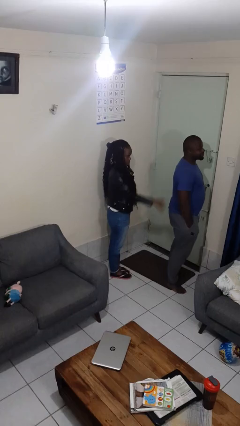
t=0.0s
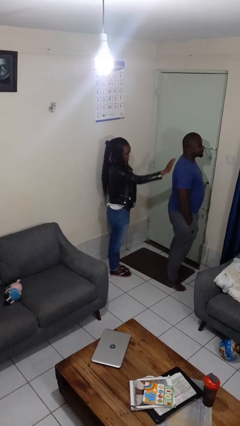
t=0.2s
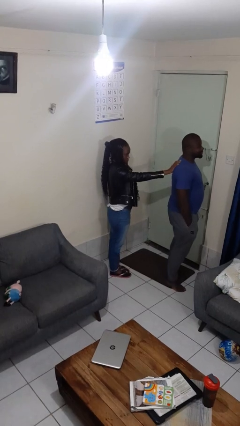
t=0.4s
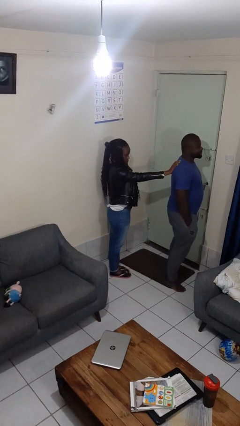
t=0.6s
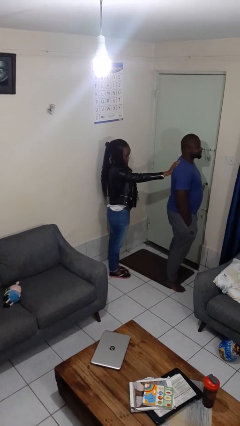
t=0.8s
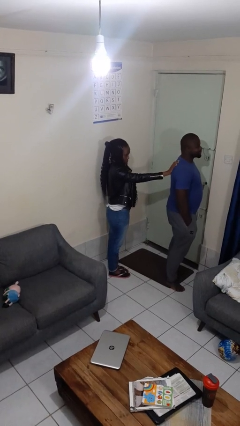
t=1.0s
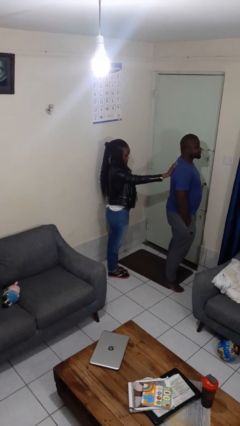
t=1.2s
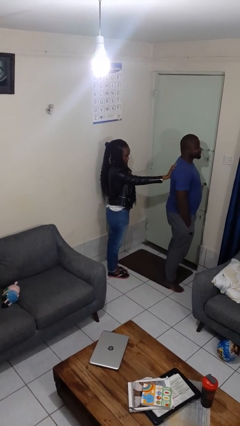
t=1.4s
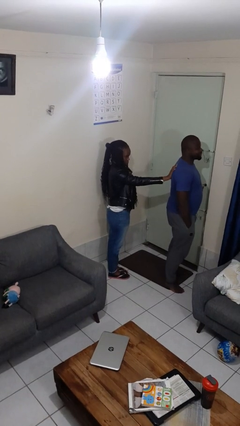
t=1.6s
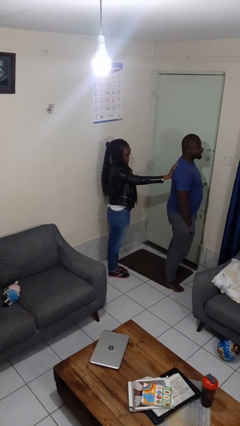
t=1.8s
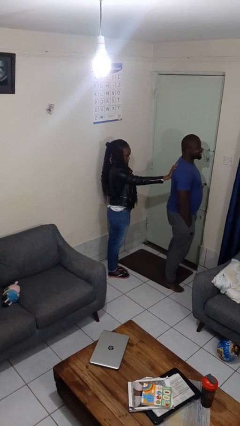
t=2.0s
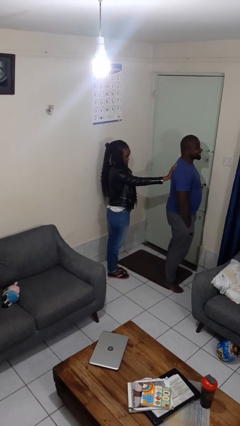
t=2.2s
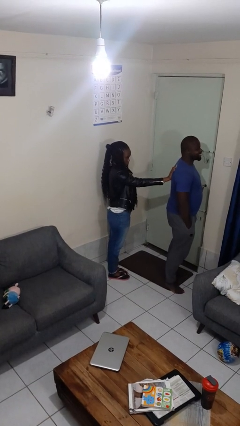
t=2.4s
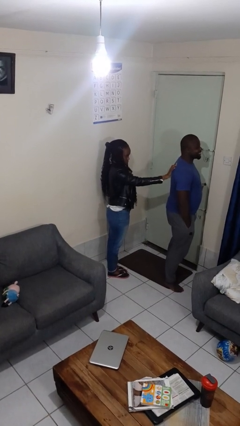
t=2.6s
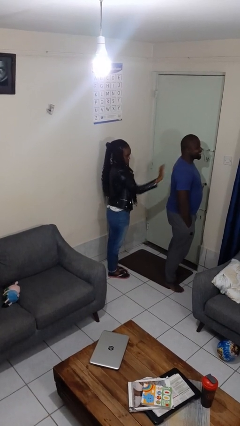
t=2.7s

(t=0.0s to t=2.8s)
person touches back of person

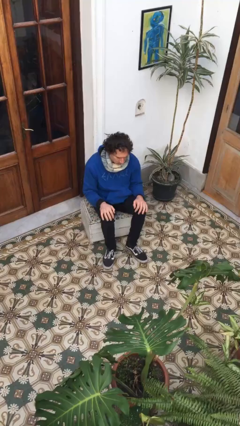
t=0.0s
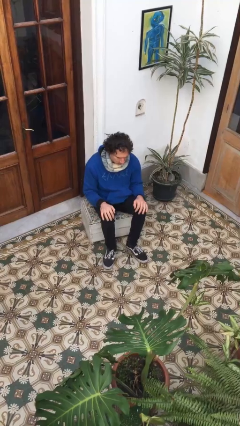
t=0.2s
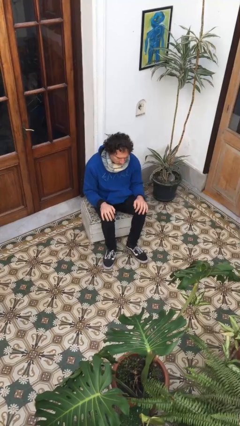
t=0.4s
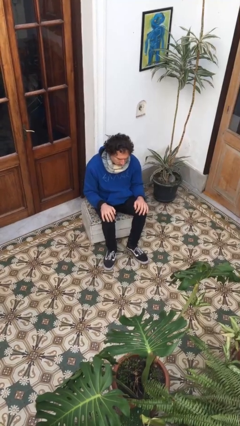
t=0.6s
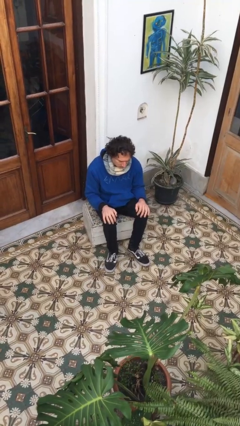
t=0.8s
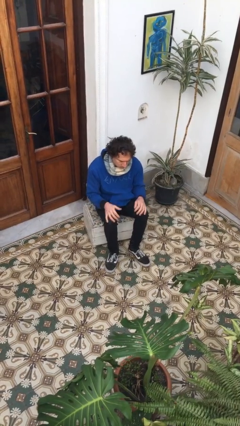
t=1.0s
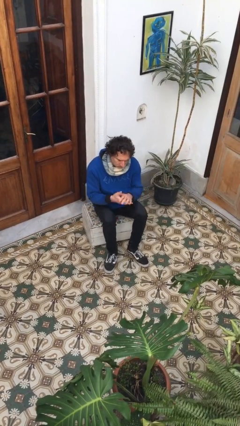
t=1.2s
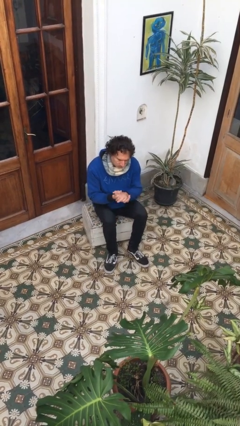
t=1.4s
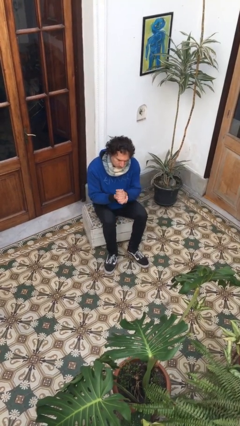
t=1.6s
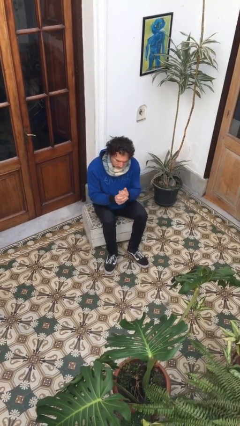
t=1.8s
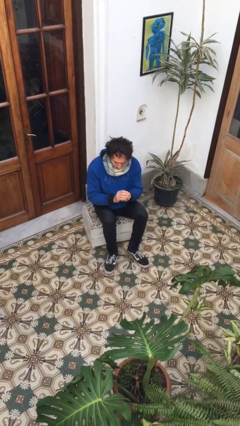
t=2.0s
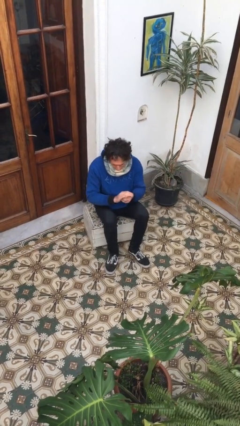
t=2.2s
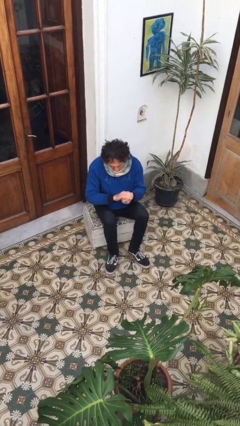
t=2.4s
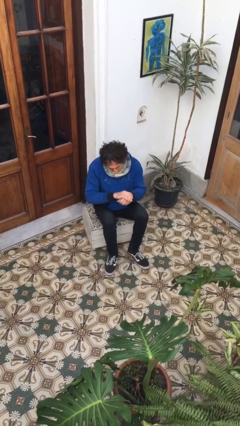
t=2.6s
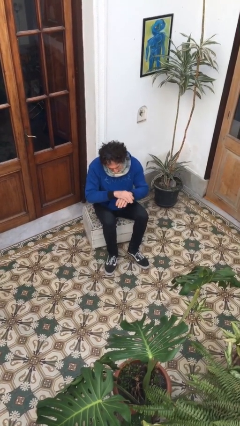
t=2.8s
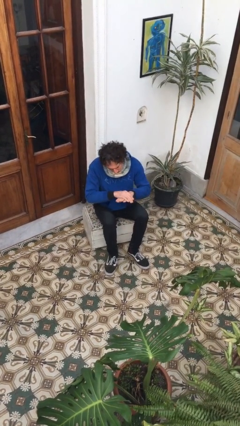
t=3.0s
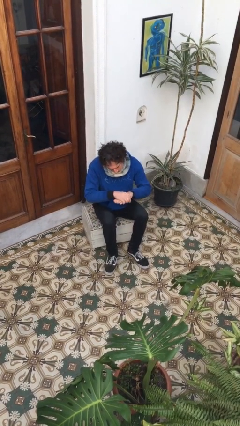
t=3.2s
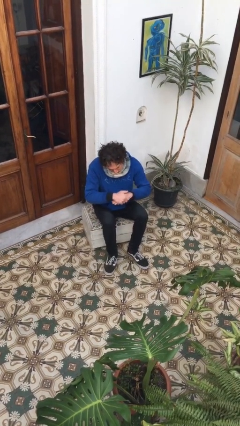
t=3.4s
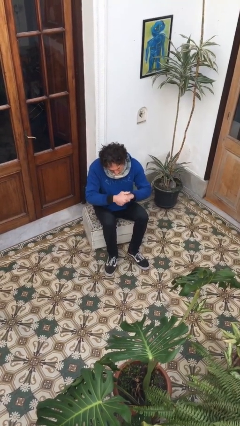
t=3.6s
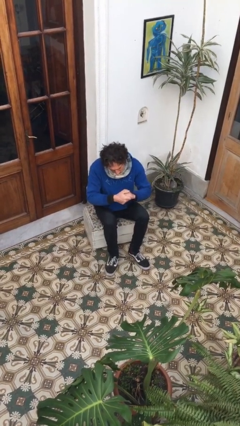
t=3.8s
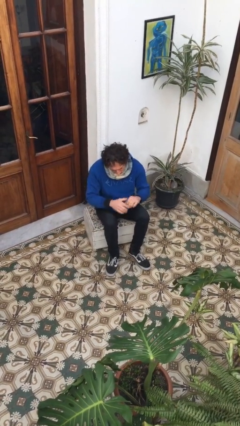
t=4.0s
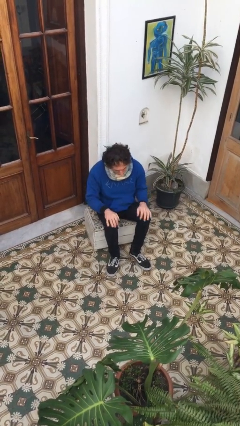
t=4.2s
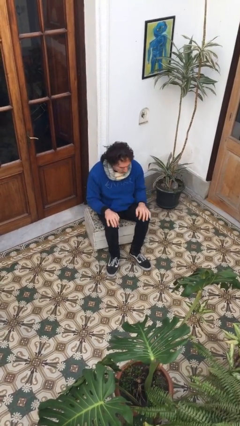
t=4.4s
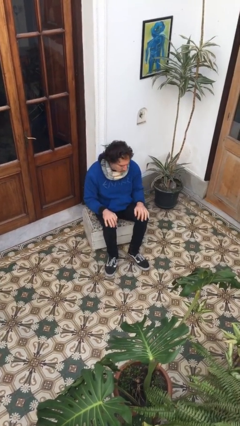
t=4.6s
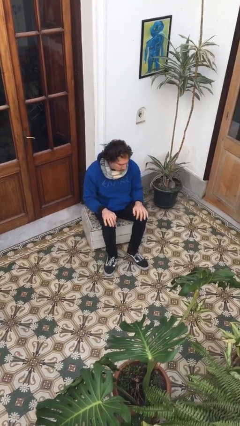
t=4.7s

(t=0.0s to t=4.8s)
person looks at hands in lap

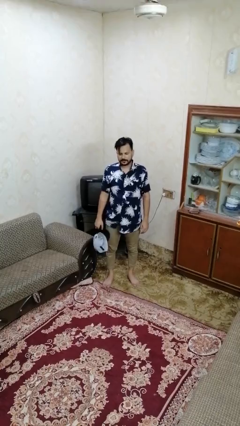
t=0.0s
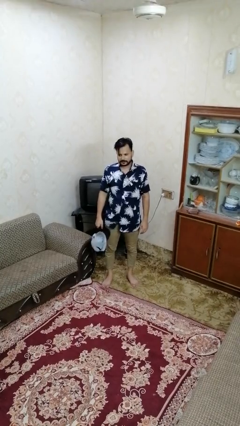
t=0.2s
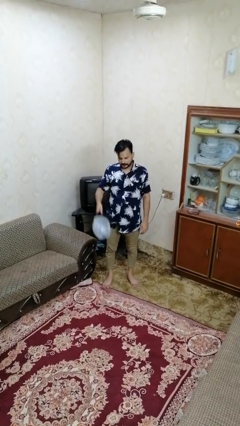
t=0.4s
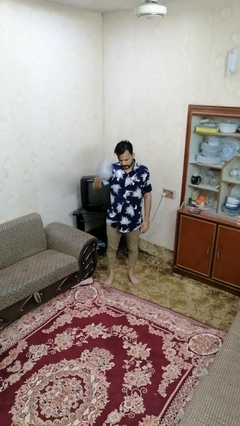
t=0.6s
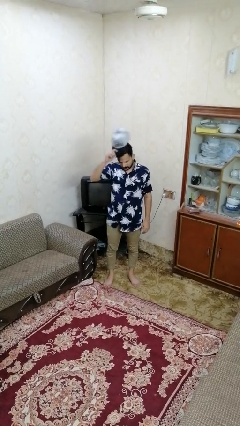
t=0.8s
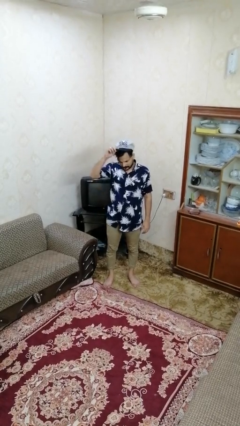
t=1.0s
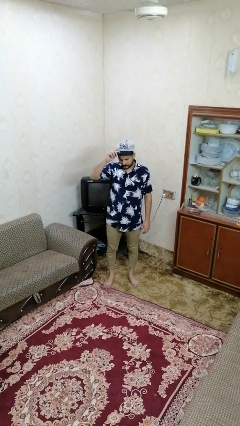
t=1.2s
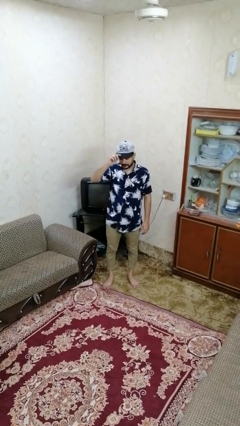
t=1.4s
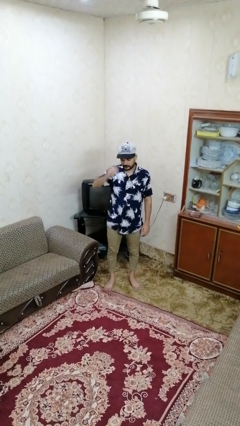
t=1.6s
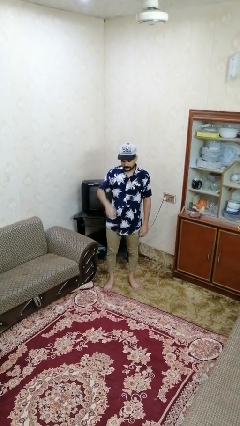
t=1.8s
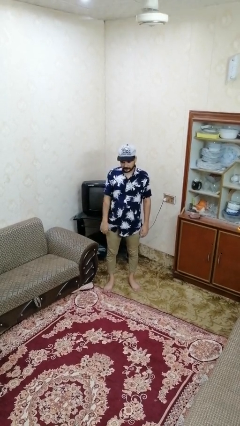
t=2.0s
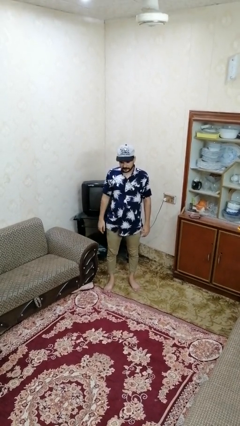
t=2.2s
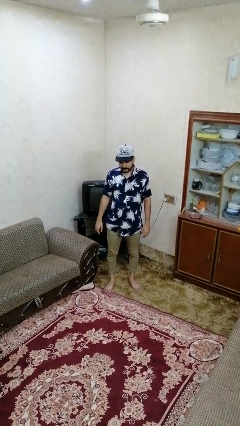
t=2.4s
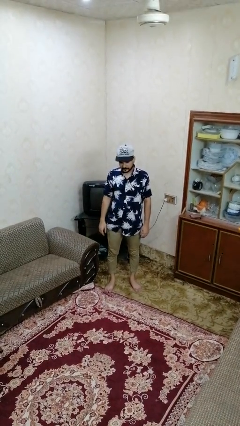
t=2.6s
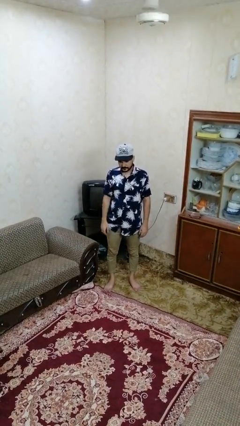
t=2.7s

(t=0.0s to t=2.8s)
person puts on hat

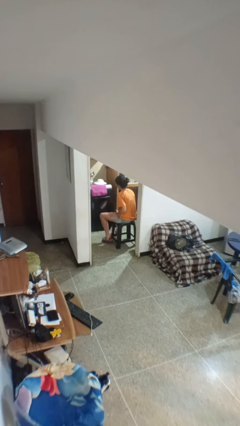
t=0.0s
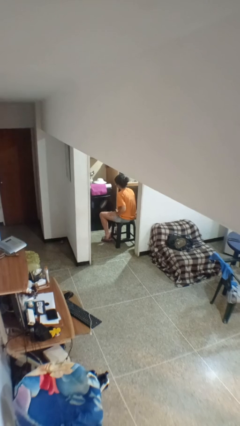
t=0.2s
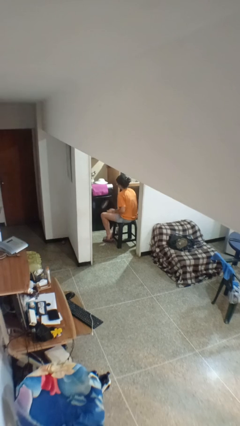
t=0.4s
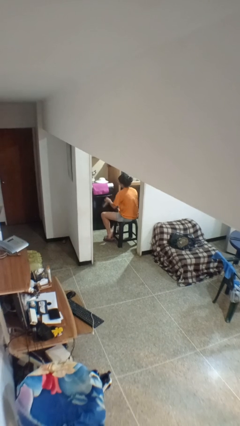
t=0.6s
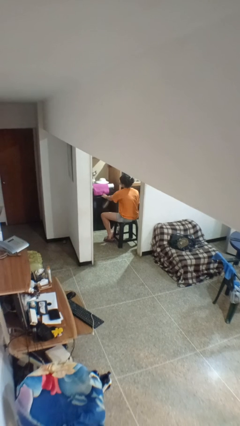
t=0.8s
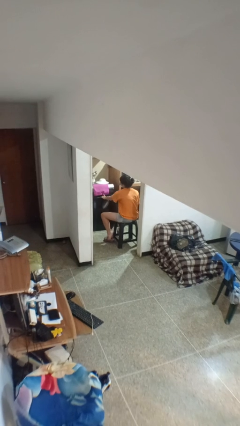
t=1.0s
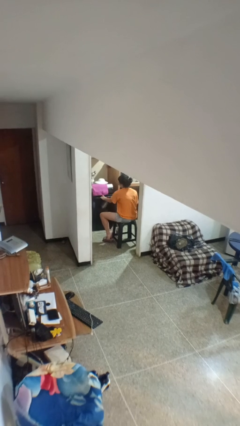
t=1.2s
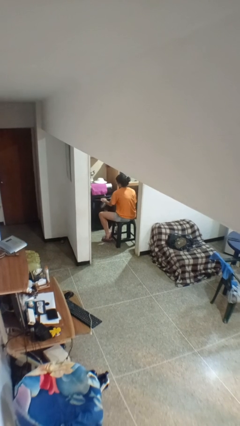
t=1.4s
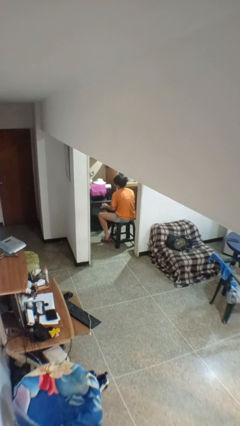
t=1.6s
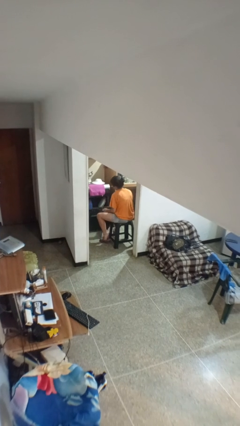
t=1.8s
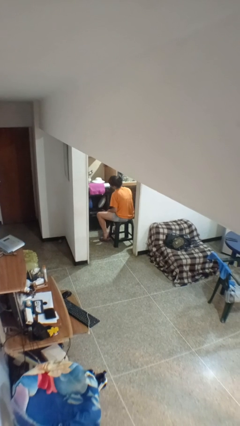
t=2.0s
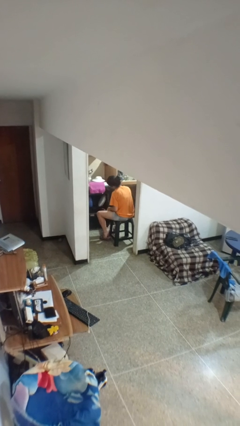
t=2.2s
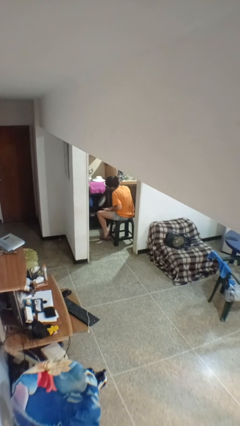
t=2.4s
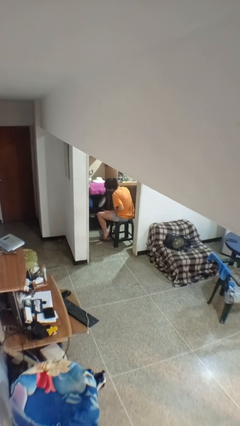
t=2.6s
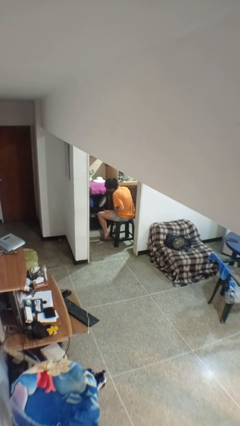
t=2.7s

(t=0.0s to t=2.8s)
person opens dishwasher

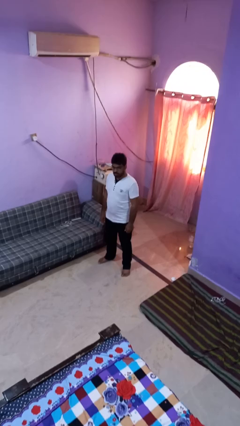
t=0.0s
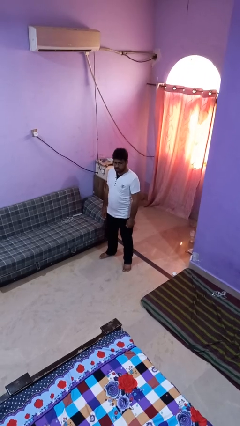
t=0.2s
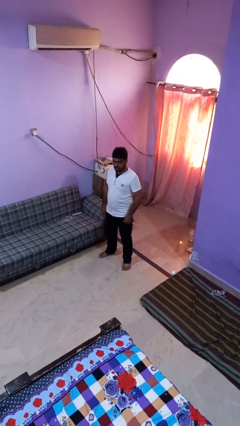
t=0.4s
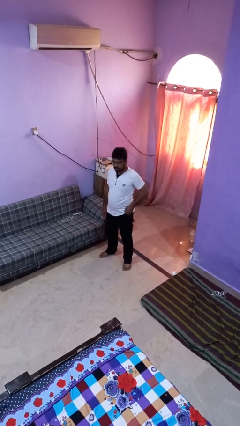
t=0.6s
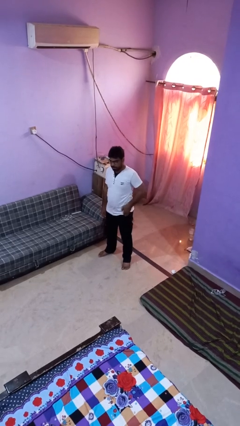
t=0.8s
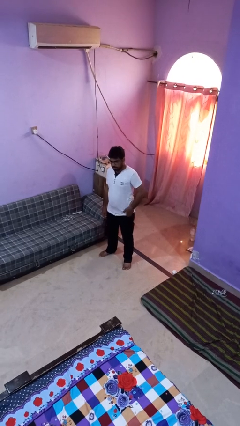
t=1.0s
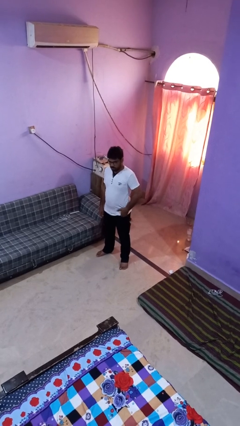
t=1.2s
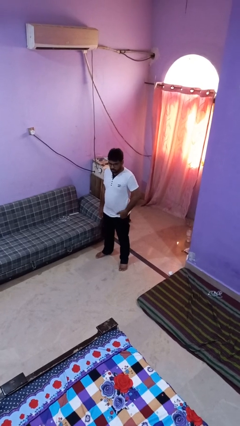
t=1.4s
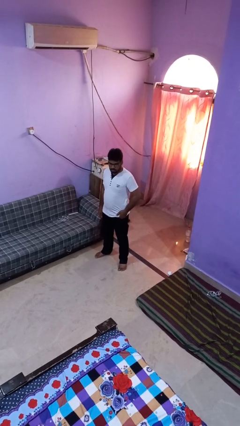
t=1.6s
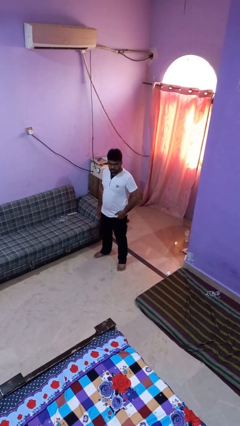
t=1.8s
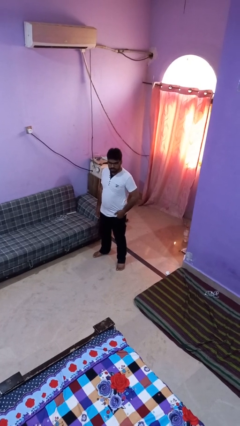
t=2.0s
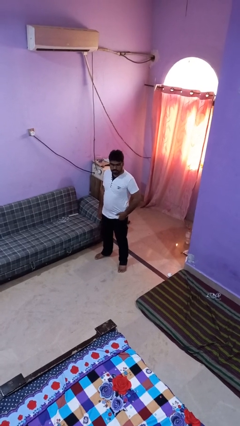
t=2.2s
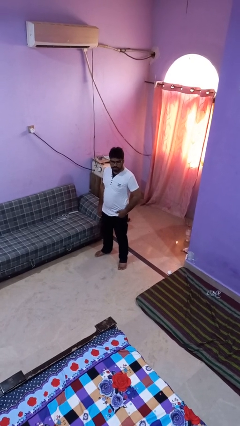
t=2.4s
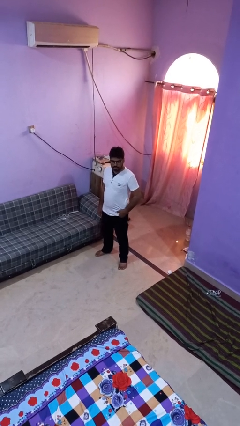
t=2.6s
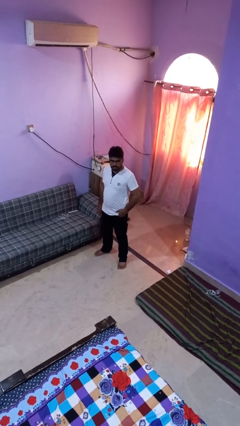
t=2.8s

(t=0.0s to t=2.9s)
person puts hands in back pockets

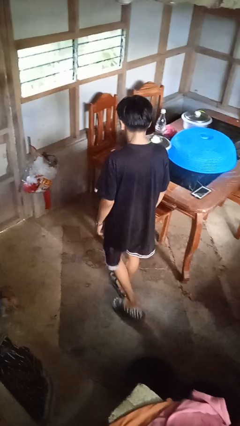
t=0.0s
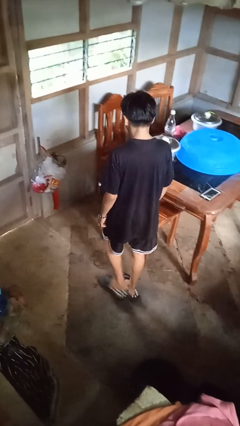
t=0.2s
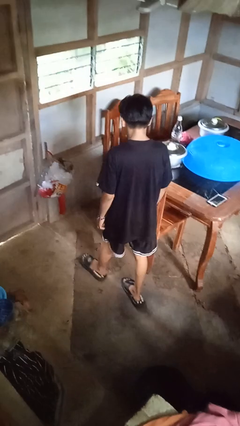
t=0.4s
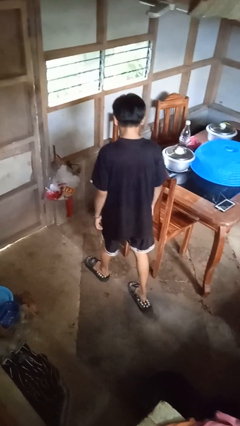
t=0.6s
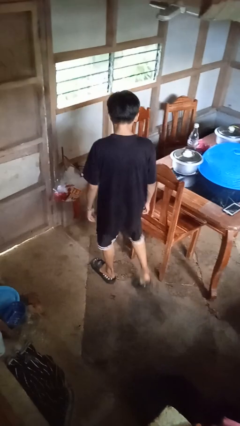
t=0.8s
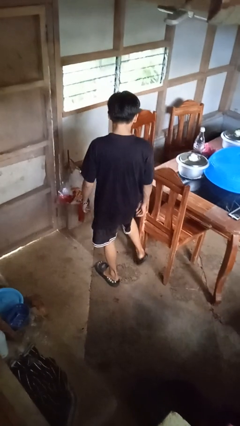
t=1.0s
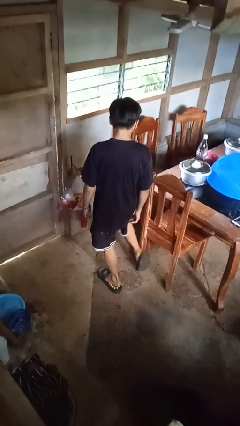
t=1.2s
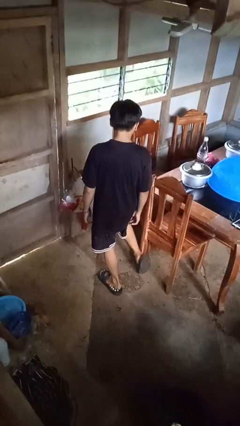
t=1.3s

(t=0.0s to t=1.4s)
person stubs toe

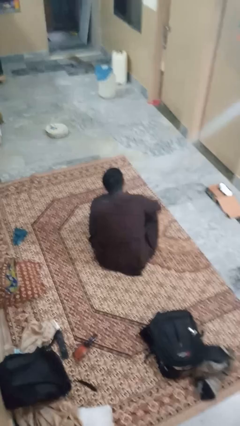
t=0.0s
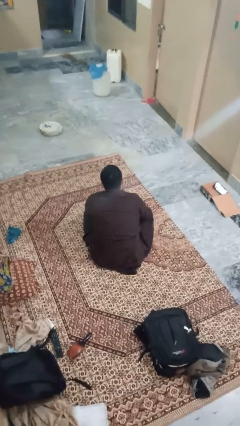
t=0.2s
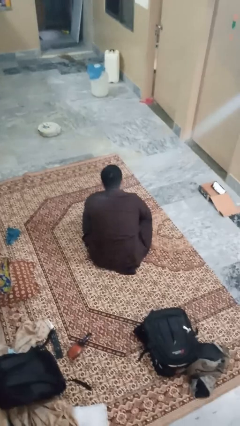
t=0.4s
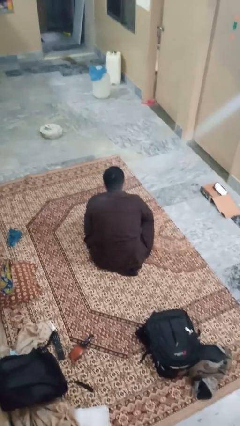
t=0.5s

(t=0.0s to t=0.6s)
person gestures number five
